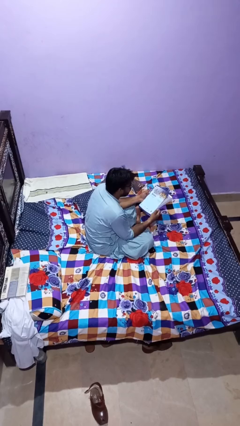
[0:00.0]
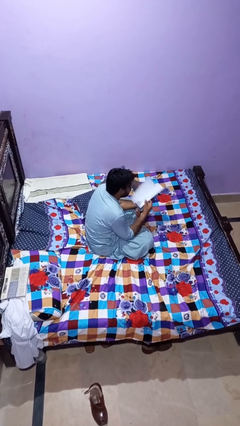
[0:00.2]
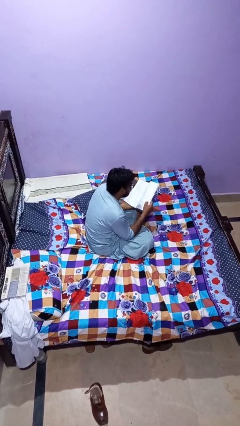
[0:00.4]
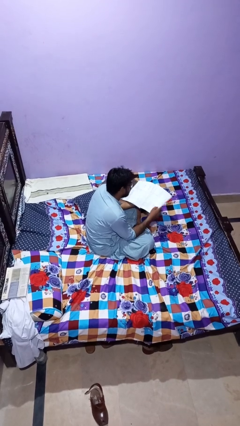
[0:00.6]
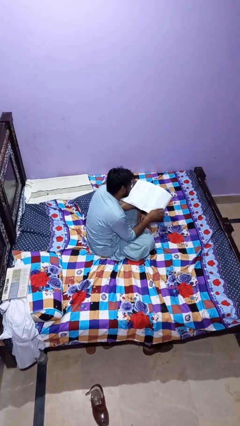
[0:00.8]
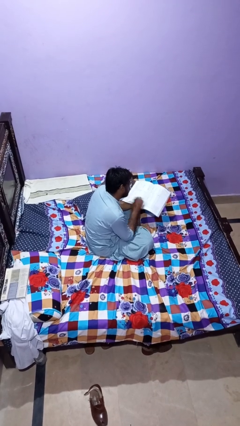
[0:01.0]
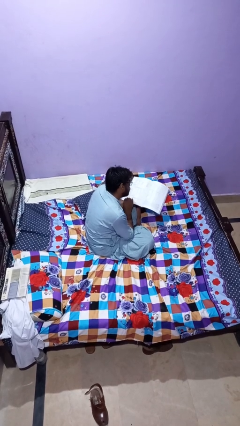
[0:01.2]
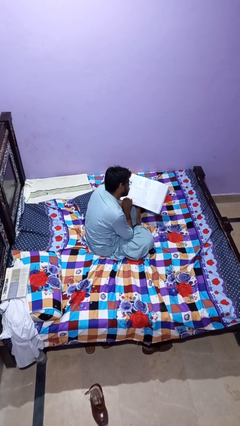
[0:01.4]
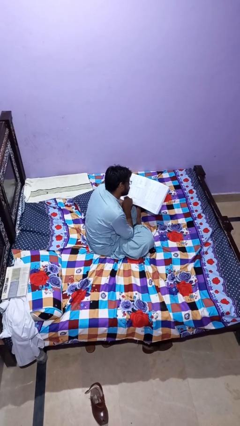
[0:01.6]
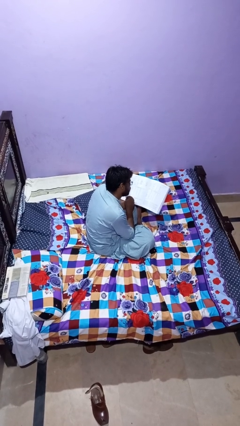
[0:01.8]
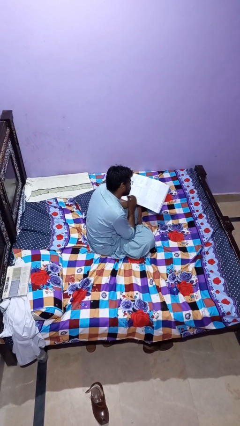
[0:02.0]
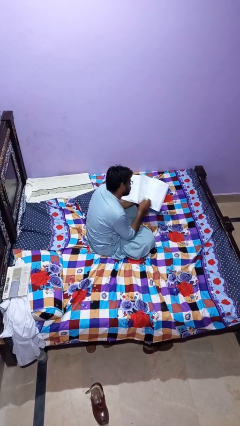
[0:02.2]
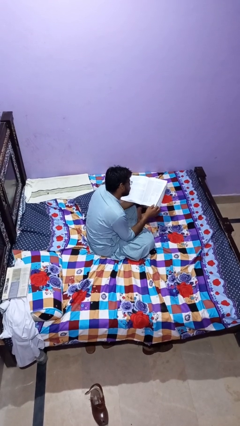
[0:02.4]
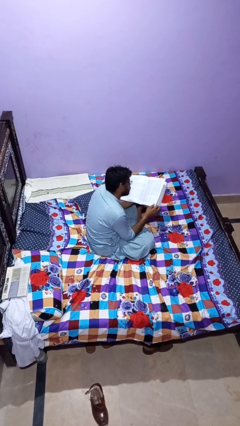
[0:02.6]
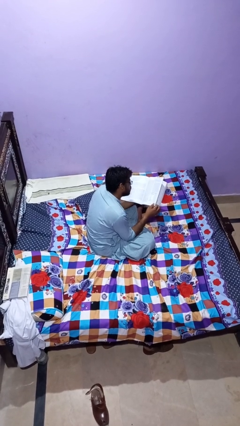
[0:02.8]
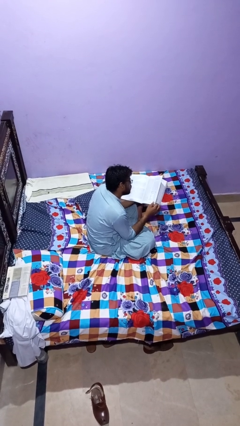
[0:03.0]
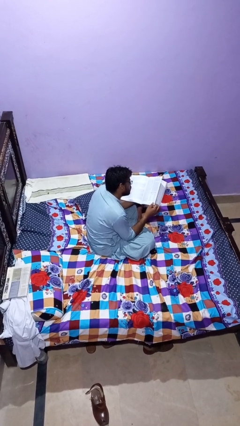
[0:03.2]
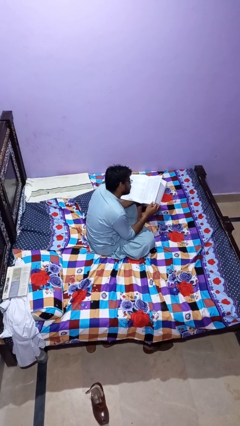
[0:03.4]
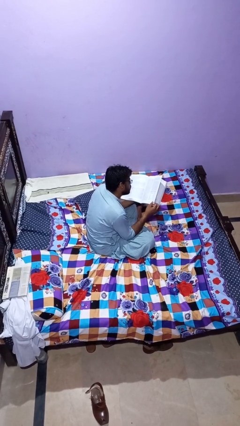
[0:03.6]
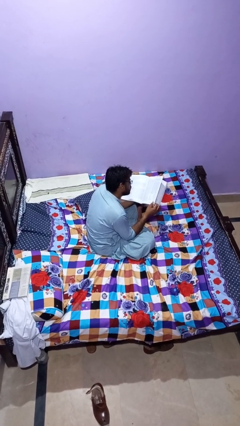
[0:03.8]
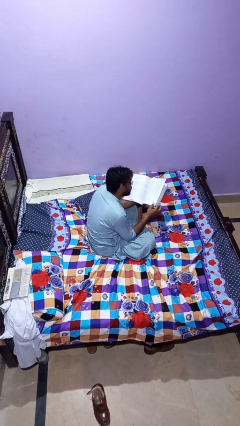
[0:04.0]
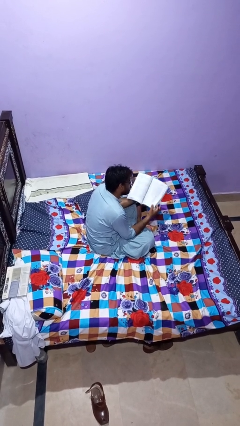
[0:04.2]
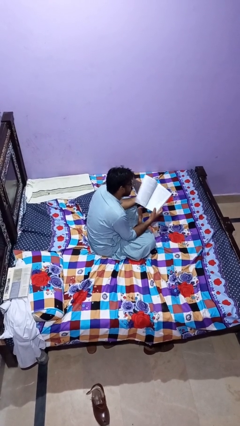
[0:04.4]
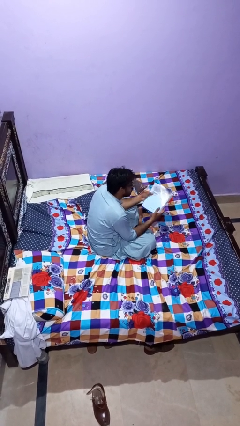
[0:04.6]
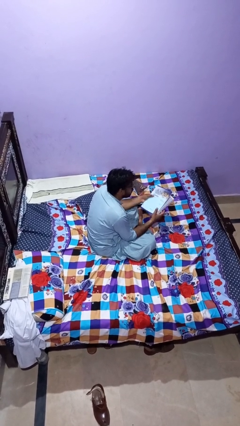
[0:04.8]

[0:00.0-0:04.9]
person reads magazine

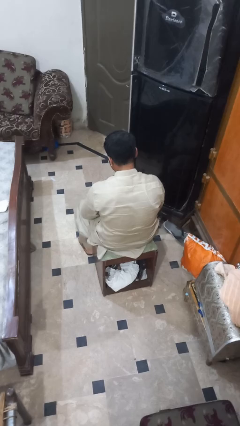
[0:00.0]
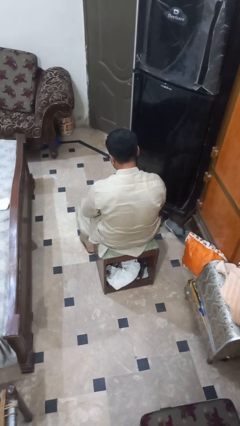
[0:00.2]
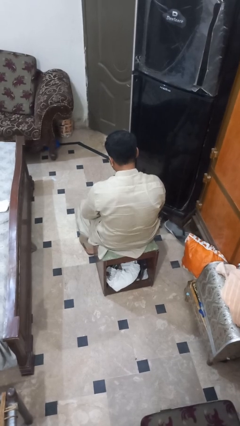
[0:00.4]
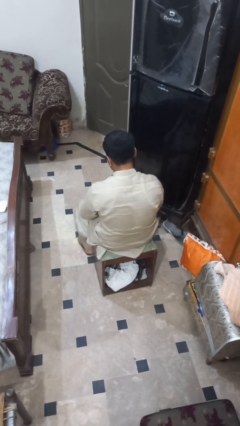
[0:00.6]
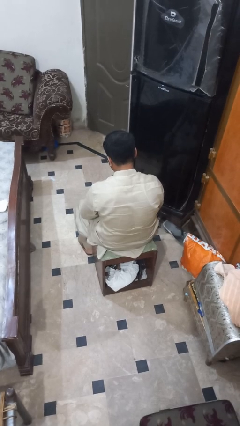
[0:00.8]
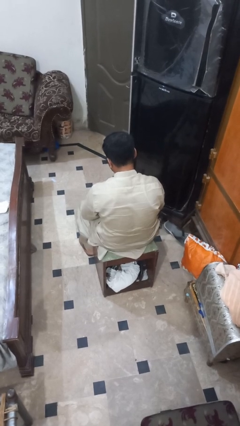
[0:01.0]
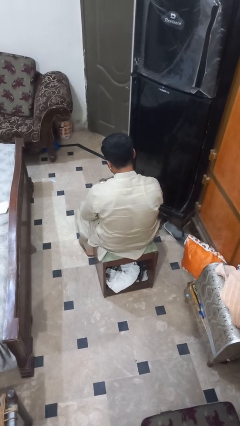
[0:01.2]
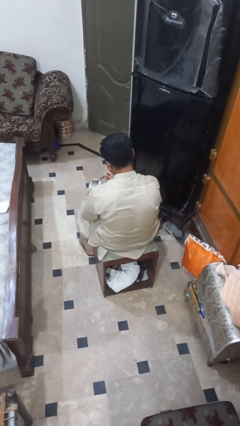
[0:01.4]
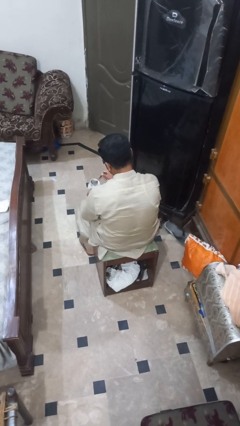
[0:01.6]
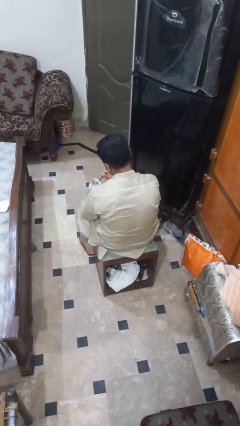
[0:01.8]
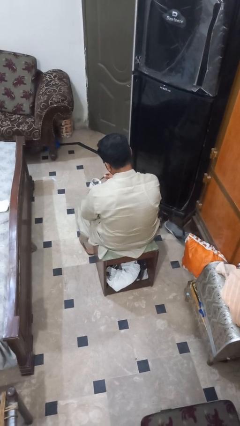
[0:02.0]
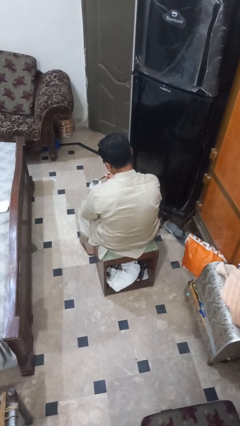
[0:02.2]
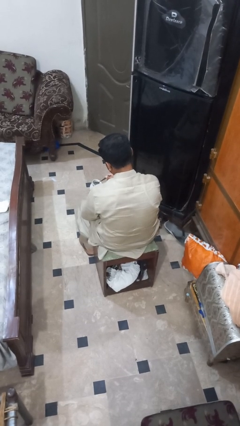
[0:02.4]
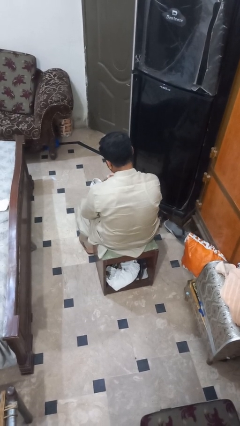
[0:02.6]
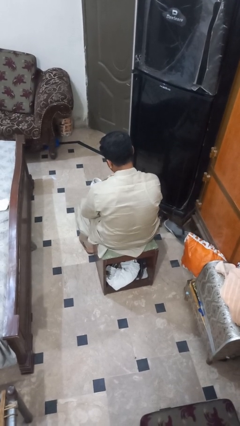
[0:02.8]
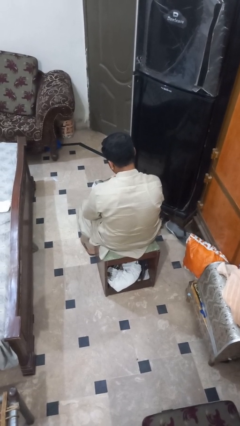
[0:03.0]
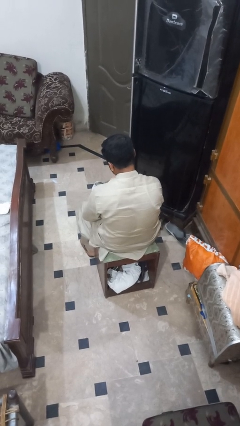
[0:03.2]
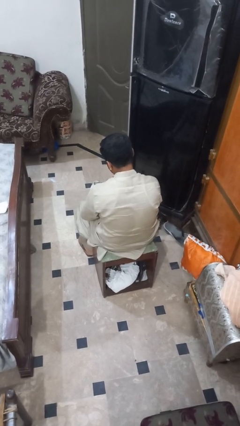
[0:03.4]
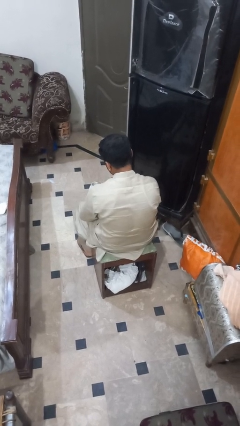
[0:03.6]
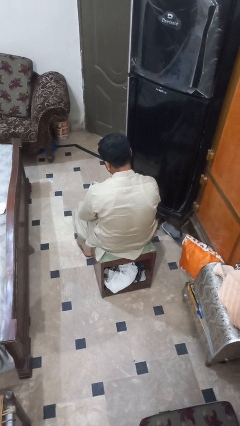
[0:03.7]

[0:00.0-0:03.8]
person stirs mug

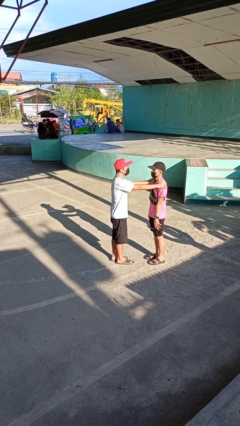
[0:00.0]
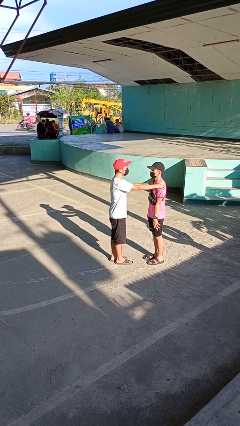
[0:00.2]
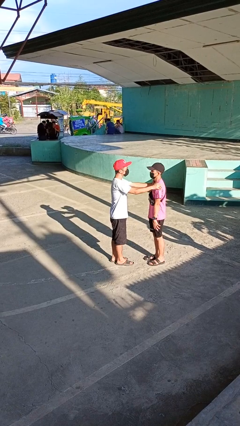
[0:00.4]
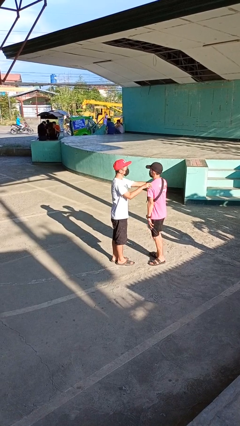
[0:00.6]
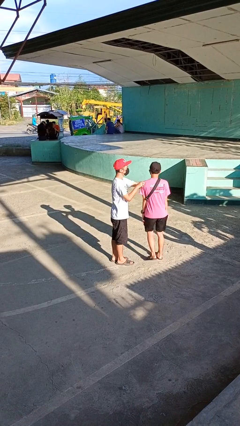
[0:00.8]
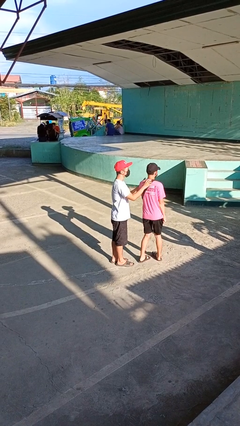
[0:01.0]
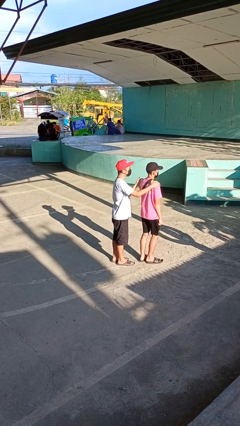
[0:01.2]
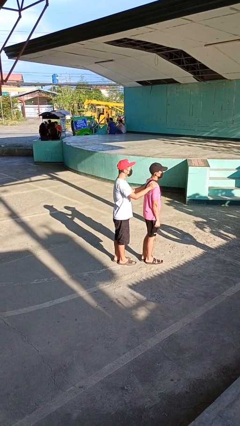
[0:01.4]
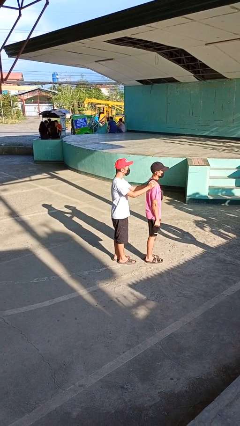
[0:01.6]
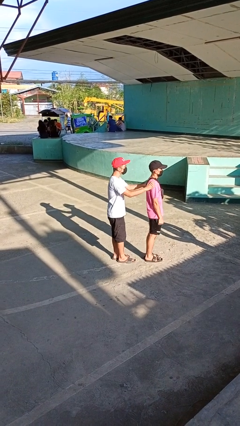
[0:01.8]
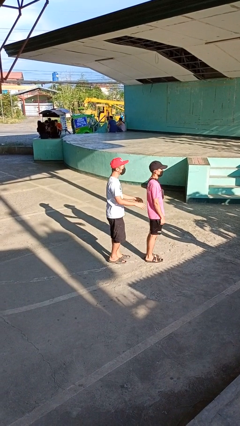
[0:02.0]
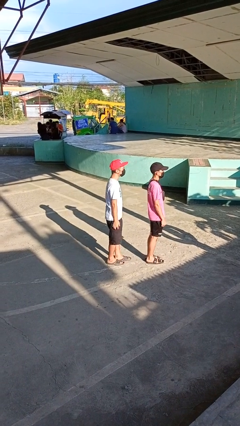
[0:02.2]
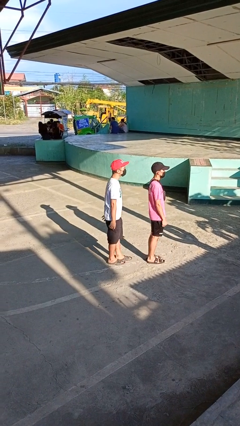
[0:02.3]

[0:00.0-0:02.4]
person spins person around

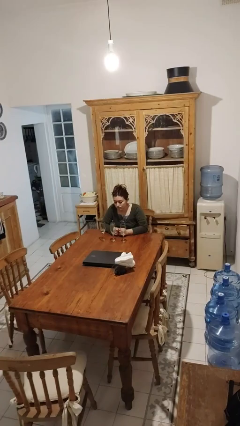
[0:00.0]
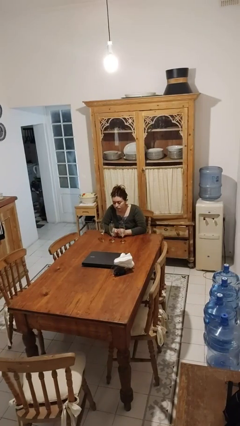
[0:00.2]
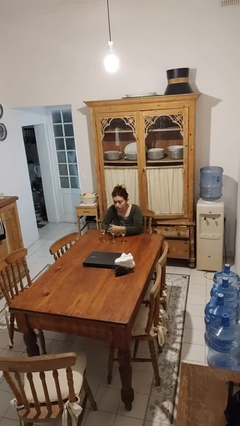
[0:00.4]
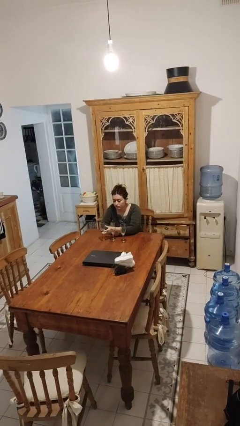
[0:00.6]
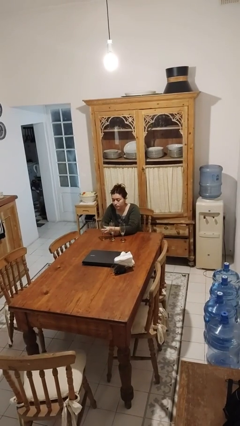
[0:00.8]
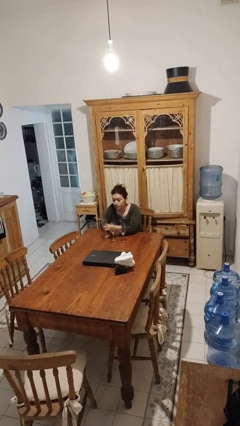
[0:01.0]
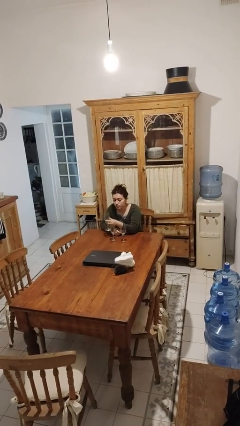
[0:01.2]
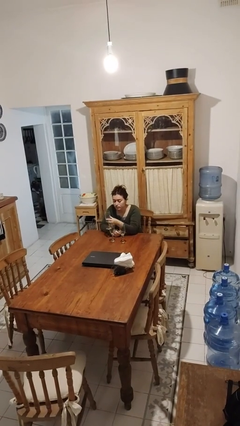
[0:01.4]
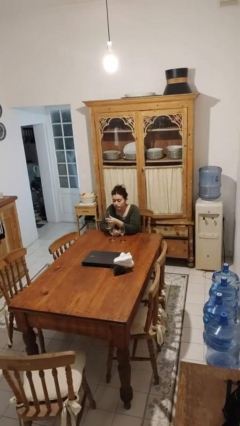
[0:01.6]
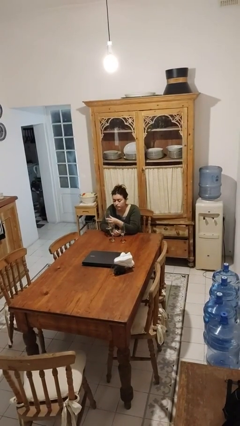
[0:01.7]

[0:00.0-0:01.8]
person picks up object from table

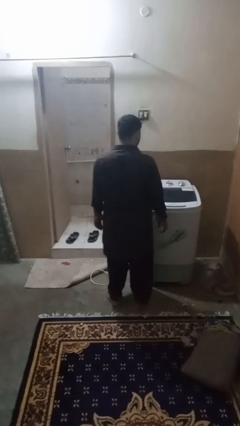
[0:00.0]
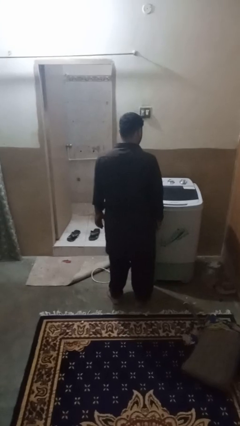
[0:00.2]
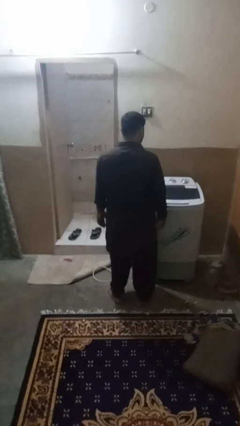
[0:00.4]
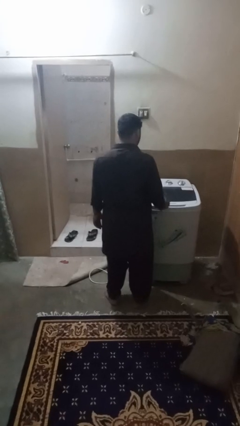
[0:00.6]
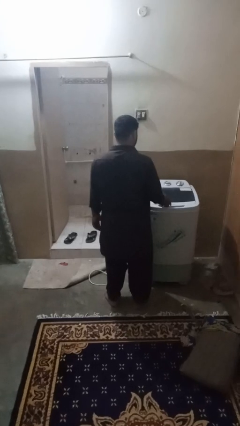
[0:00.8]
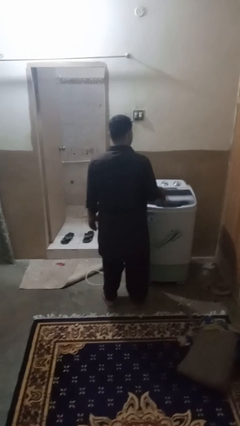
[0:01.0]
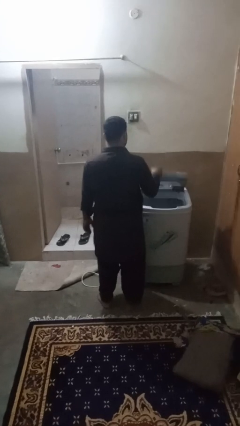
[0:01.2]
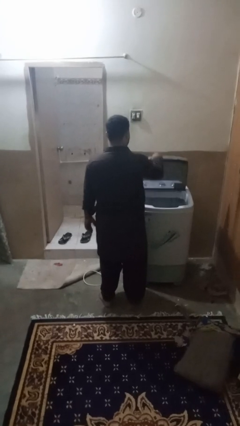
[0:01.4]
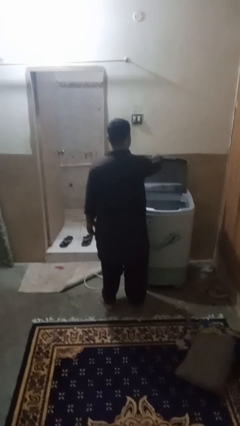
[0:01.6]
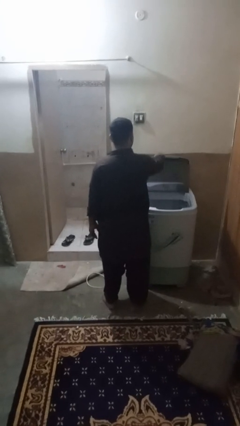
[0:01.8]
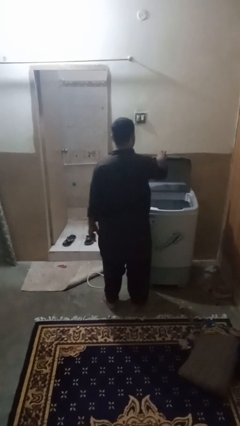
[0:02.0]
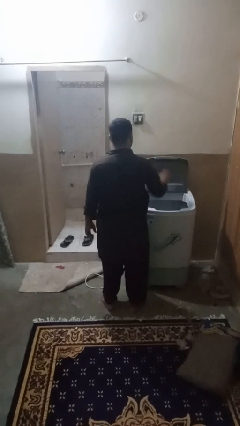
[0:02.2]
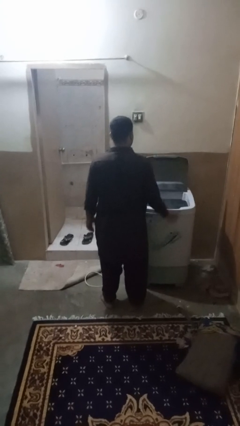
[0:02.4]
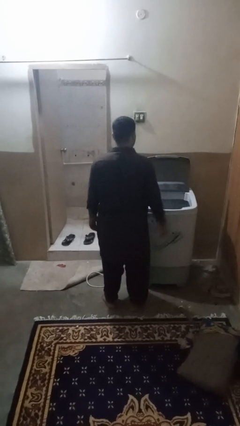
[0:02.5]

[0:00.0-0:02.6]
person opens clothes washer

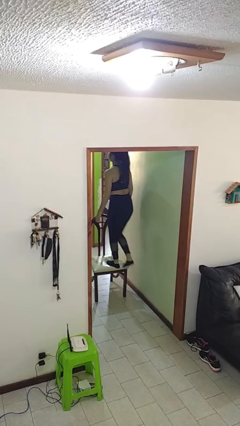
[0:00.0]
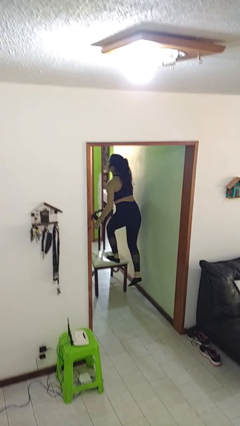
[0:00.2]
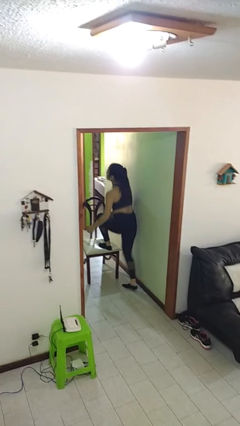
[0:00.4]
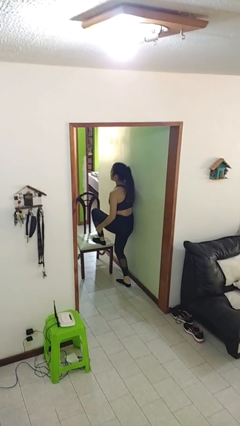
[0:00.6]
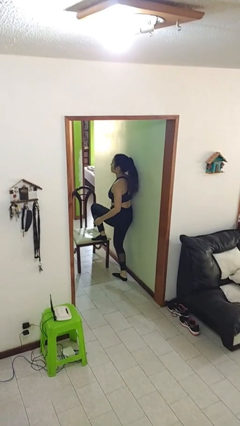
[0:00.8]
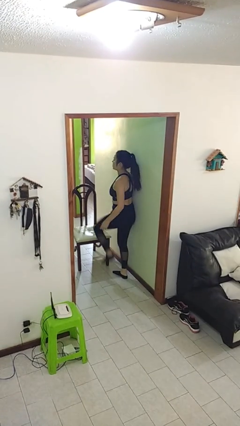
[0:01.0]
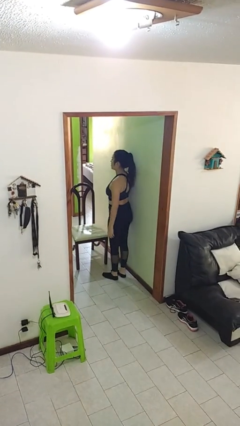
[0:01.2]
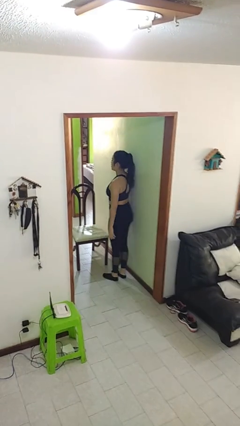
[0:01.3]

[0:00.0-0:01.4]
person climbs off chair

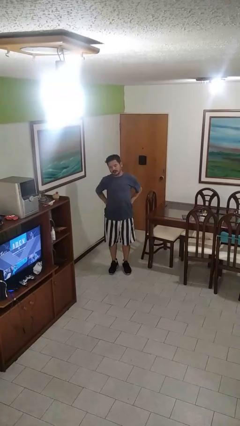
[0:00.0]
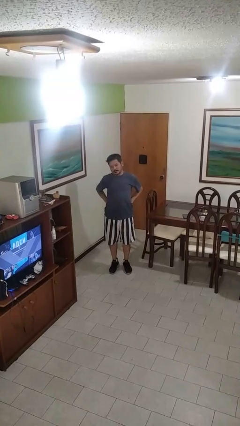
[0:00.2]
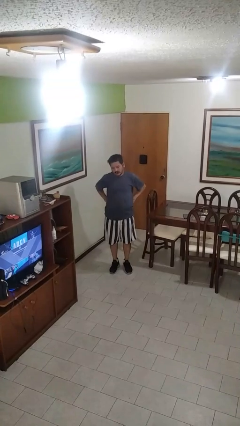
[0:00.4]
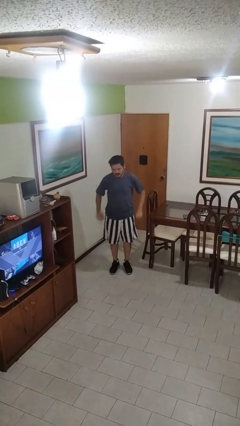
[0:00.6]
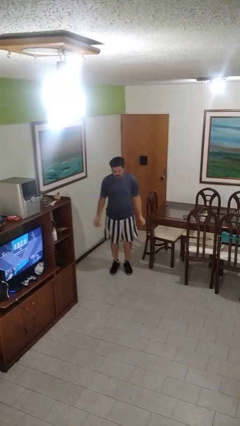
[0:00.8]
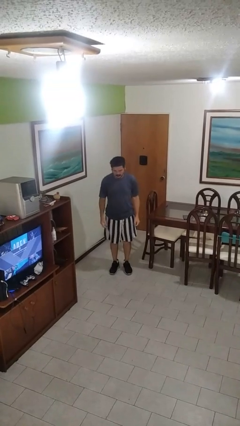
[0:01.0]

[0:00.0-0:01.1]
person stretches back
